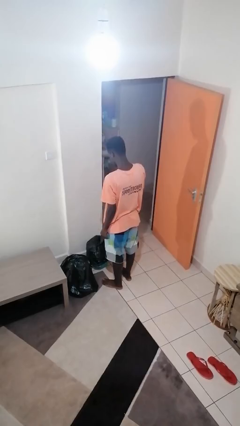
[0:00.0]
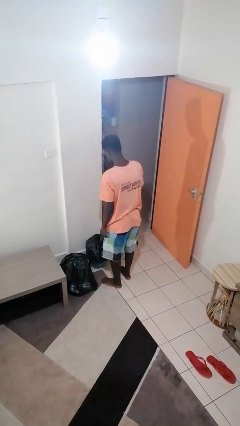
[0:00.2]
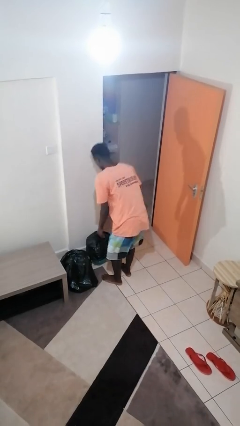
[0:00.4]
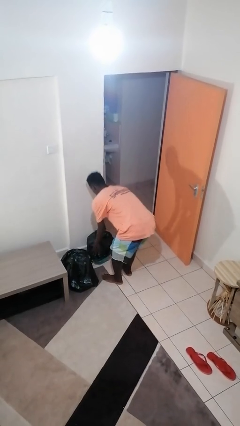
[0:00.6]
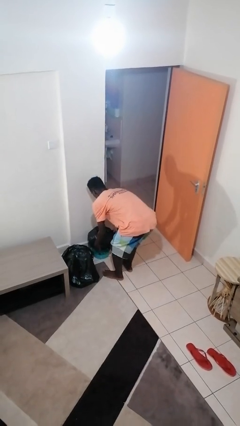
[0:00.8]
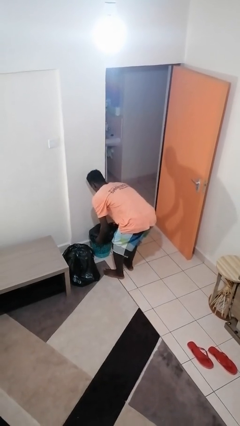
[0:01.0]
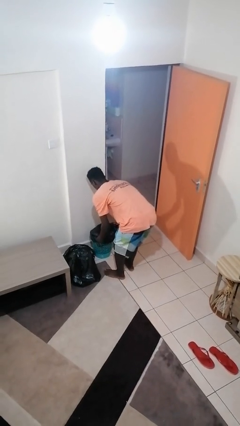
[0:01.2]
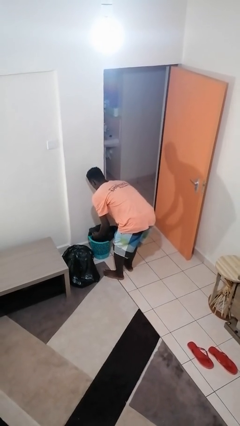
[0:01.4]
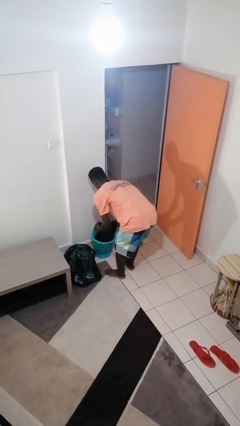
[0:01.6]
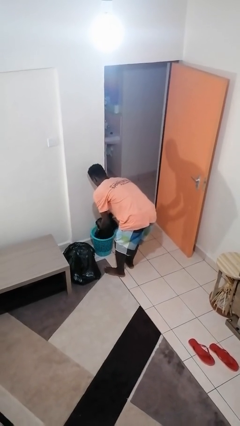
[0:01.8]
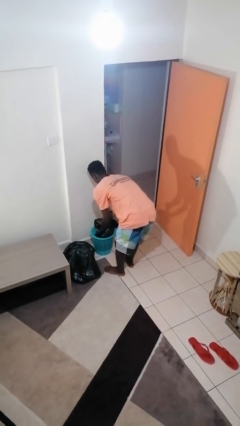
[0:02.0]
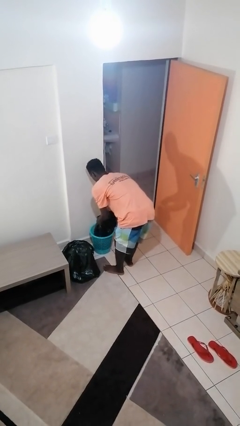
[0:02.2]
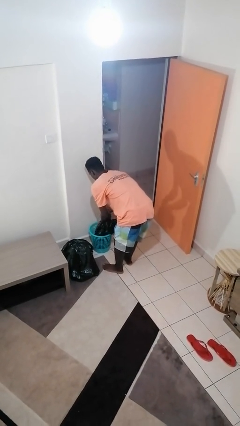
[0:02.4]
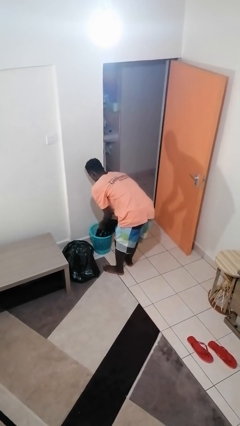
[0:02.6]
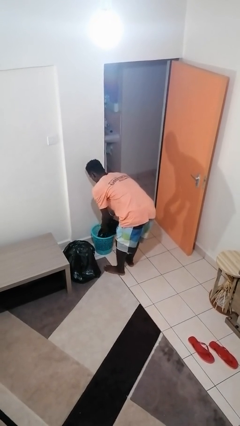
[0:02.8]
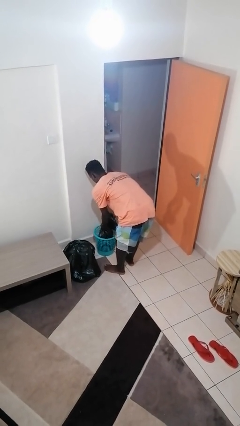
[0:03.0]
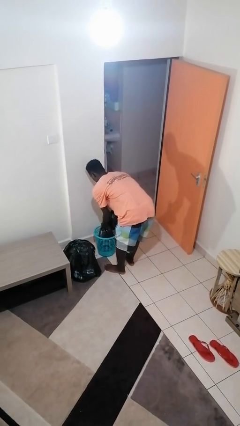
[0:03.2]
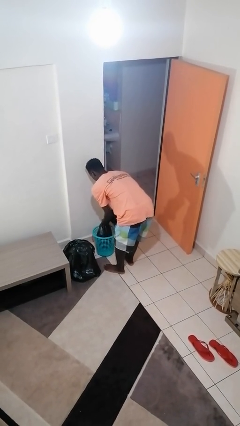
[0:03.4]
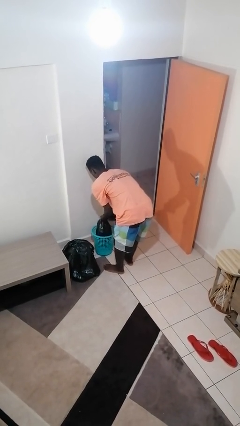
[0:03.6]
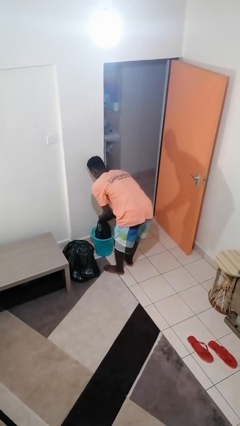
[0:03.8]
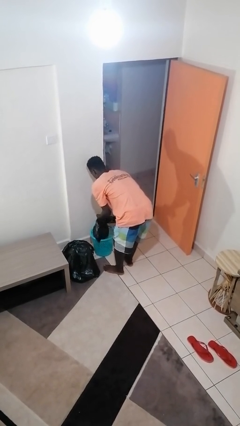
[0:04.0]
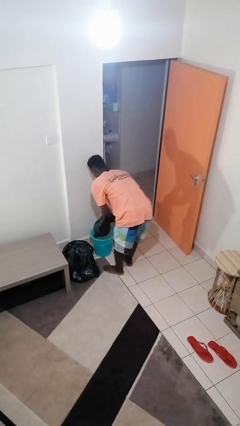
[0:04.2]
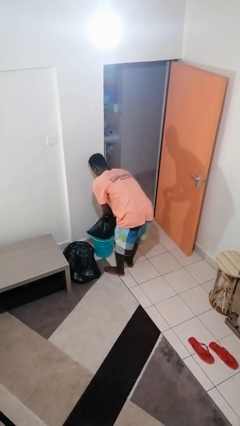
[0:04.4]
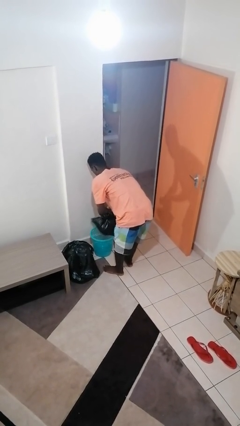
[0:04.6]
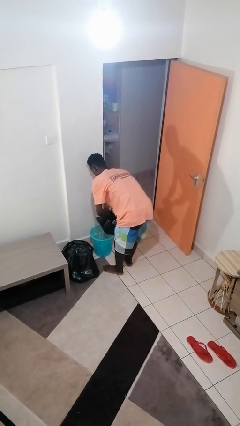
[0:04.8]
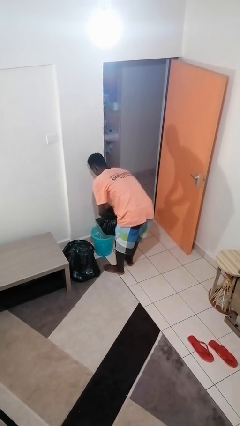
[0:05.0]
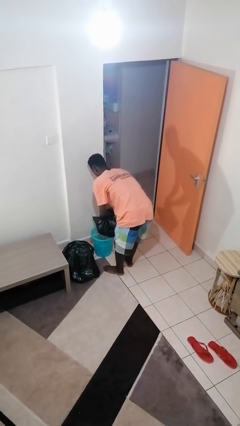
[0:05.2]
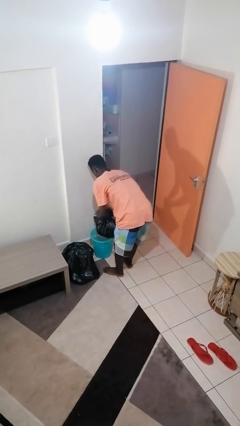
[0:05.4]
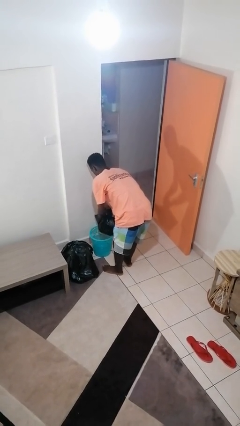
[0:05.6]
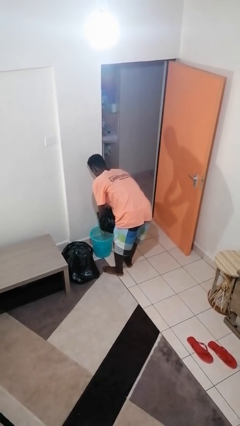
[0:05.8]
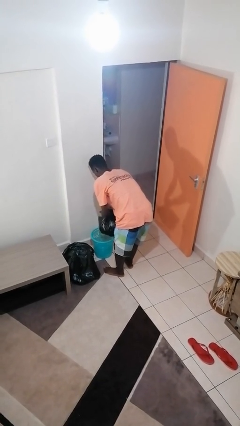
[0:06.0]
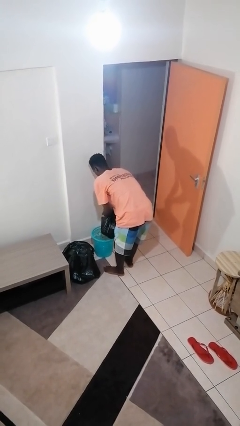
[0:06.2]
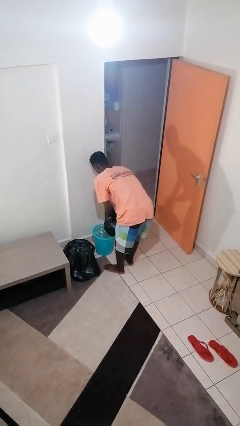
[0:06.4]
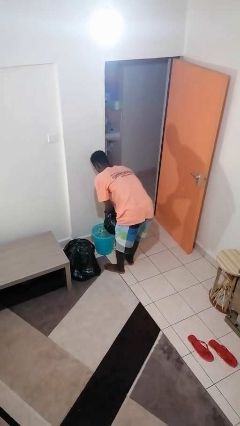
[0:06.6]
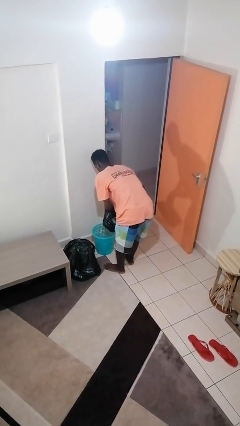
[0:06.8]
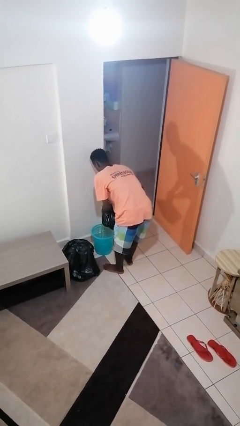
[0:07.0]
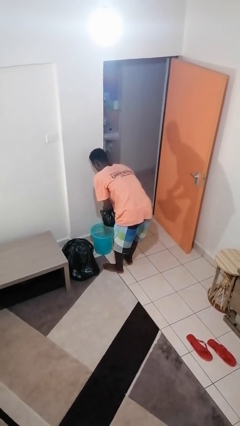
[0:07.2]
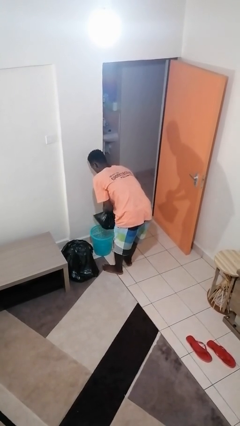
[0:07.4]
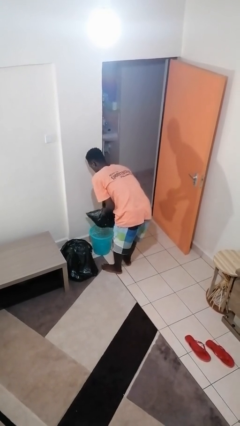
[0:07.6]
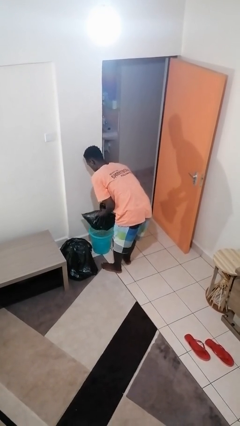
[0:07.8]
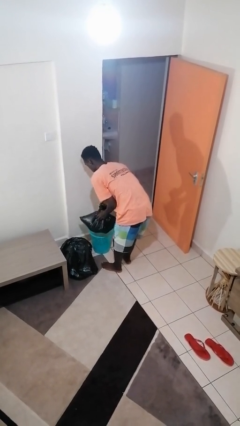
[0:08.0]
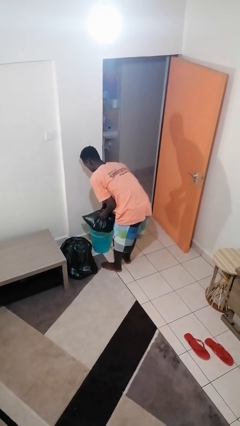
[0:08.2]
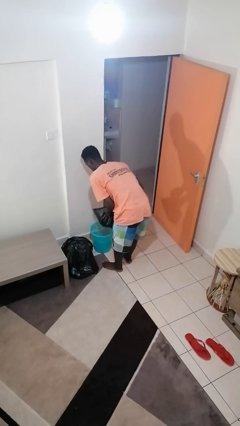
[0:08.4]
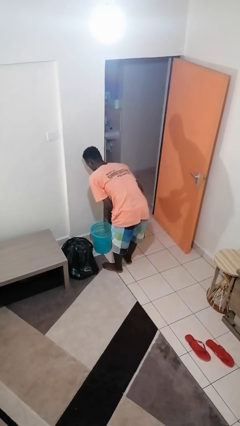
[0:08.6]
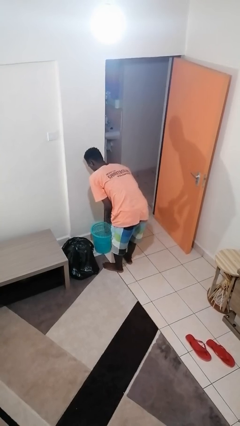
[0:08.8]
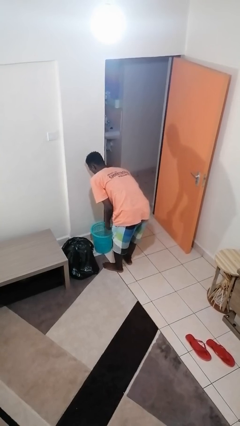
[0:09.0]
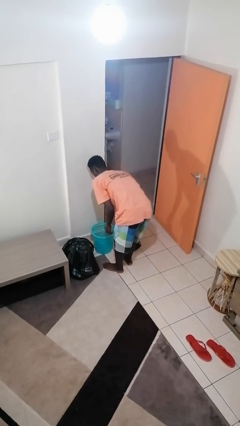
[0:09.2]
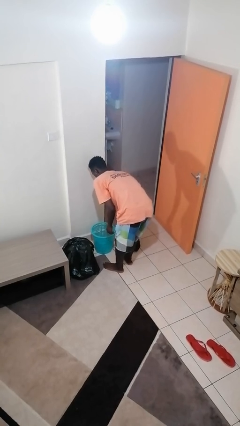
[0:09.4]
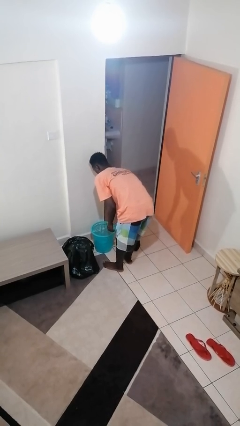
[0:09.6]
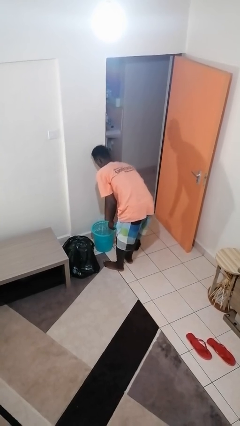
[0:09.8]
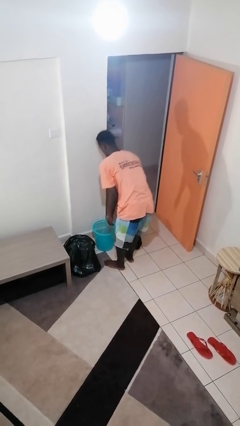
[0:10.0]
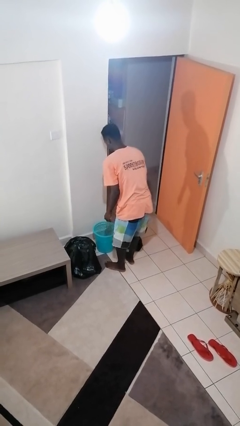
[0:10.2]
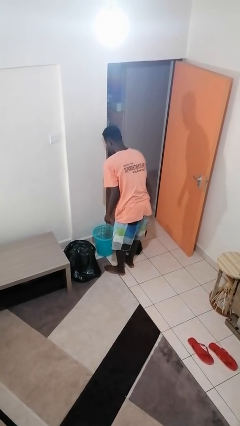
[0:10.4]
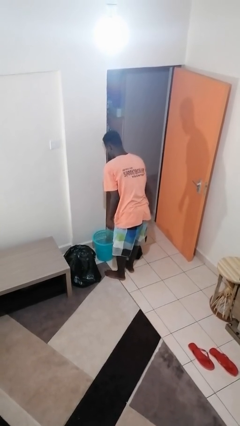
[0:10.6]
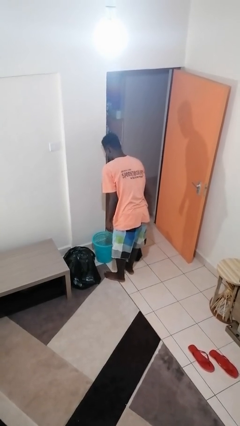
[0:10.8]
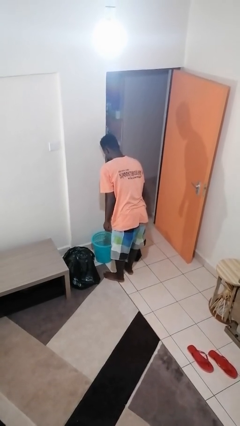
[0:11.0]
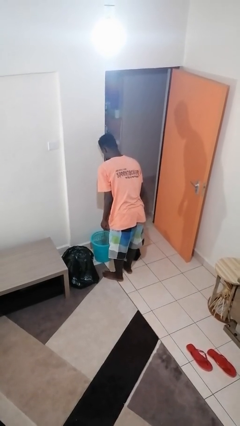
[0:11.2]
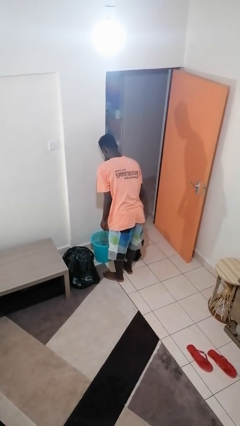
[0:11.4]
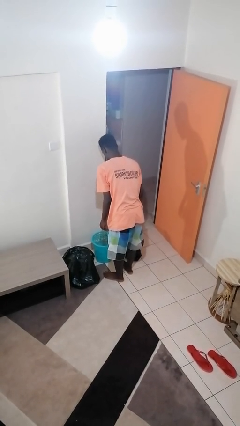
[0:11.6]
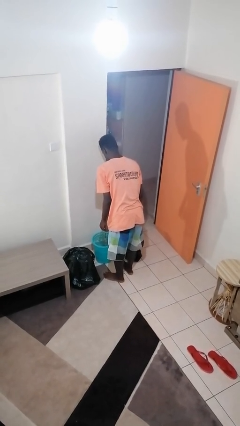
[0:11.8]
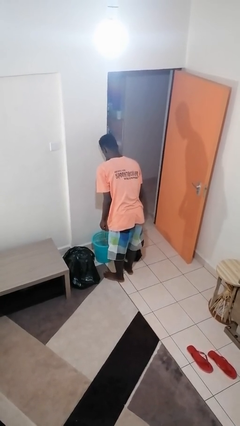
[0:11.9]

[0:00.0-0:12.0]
person removes trashbag from trashcan

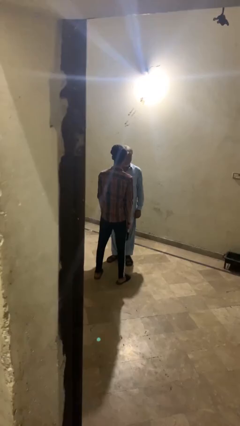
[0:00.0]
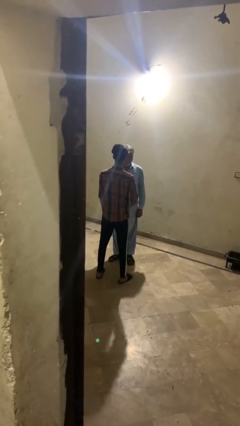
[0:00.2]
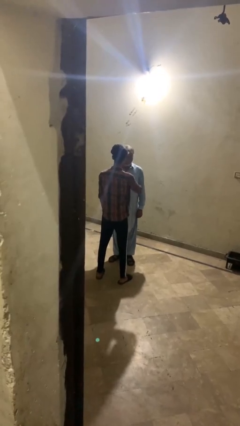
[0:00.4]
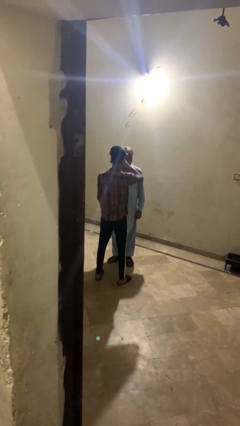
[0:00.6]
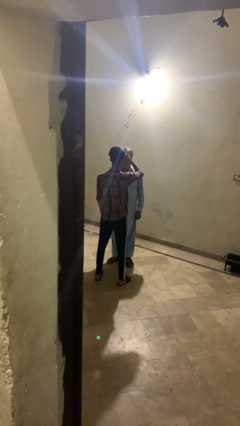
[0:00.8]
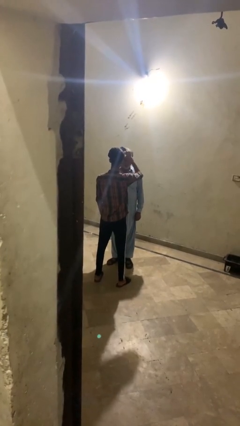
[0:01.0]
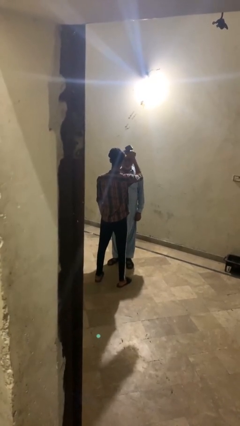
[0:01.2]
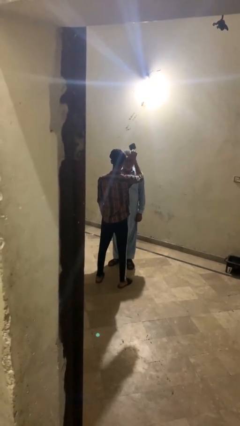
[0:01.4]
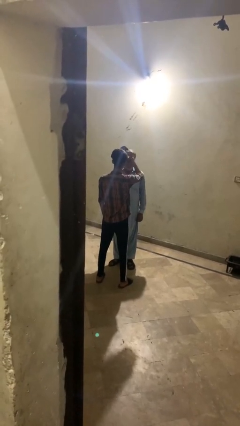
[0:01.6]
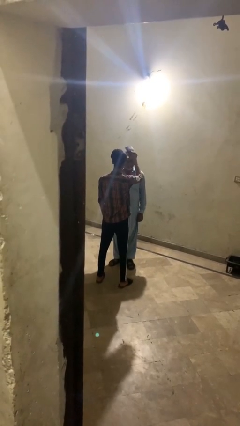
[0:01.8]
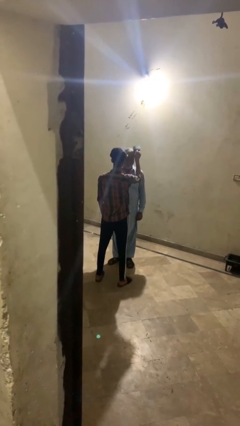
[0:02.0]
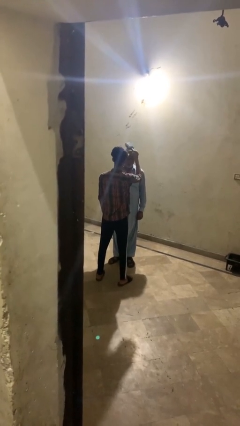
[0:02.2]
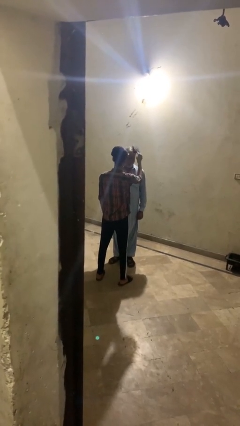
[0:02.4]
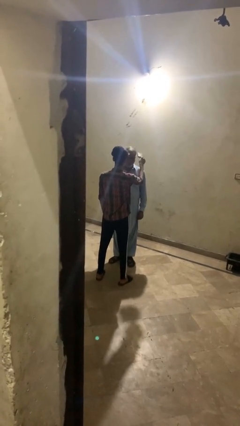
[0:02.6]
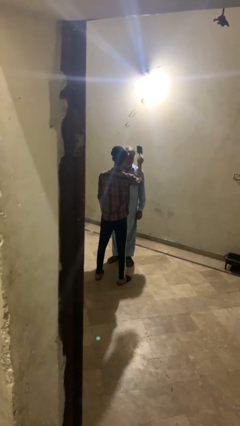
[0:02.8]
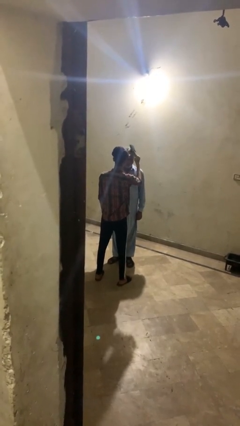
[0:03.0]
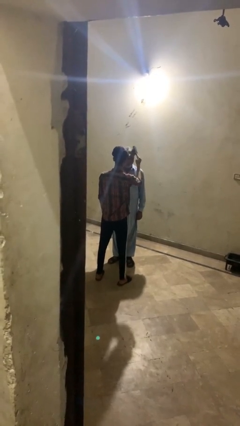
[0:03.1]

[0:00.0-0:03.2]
person brushes hair of person

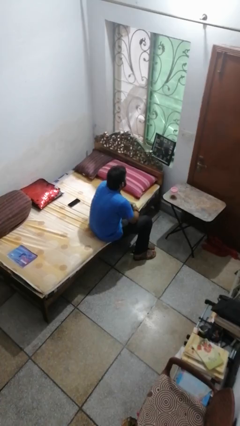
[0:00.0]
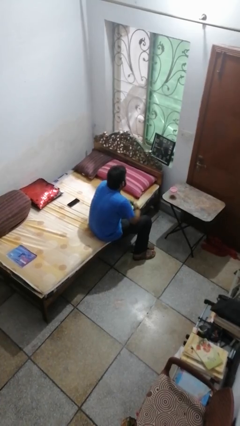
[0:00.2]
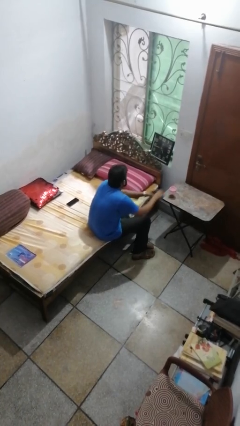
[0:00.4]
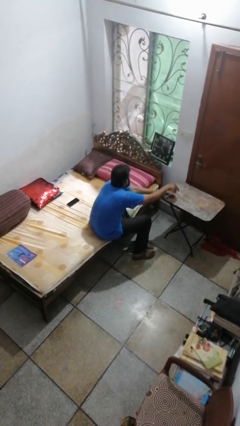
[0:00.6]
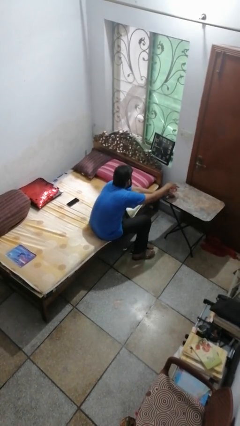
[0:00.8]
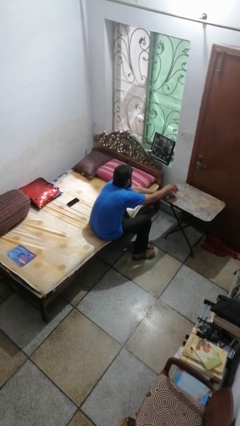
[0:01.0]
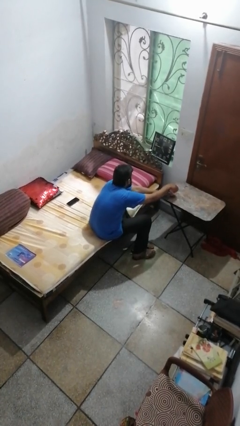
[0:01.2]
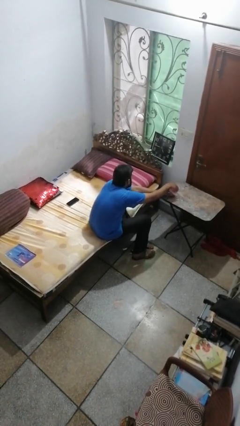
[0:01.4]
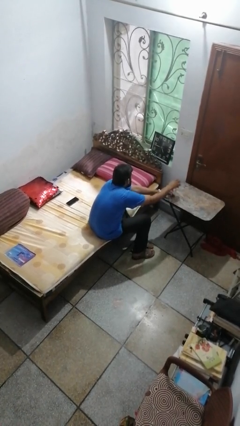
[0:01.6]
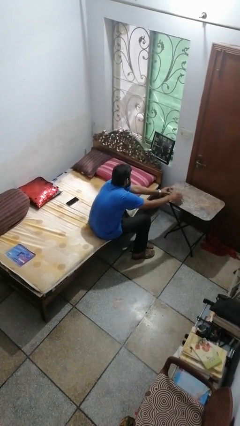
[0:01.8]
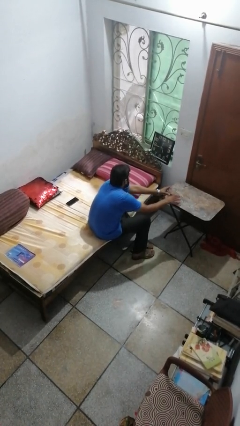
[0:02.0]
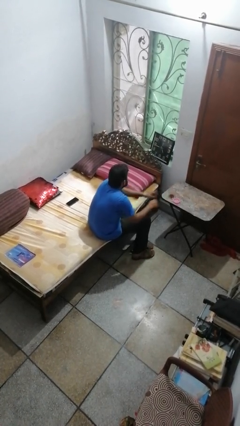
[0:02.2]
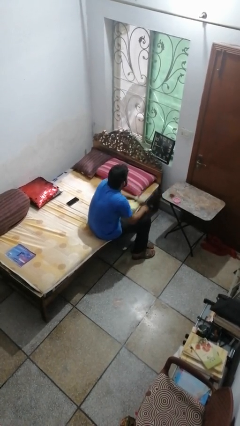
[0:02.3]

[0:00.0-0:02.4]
person opens jar
